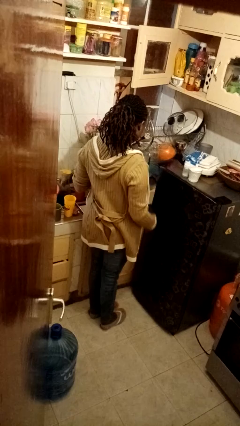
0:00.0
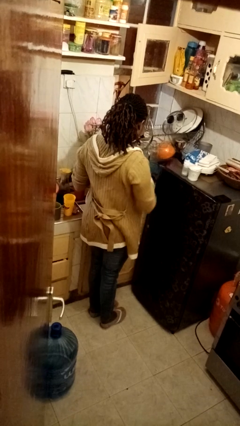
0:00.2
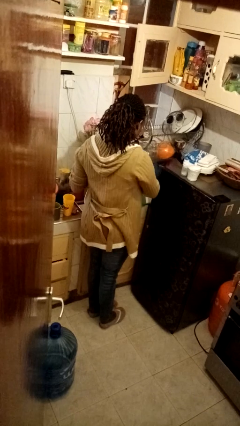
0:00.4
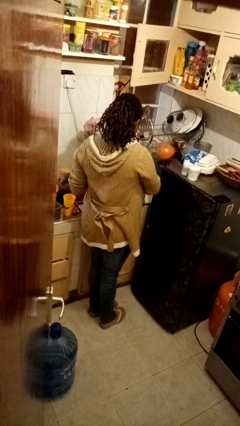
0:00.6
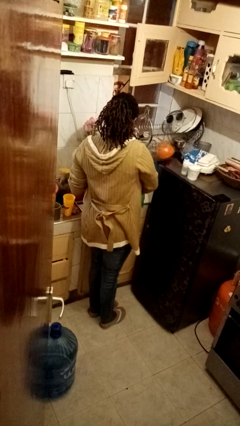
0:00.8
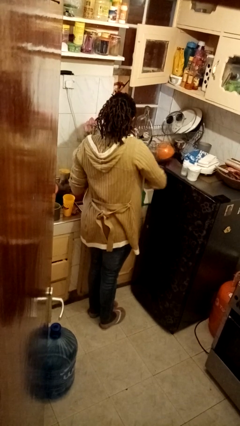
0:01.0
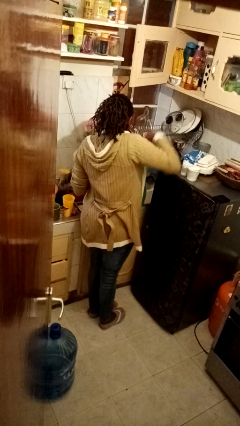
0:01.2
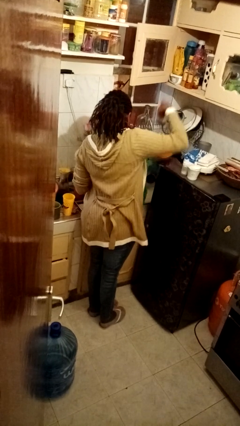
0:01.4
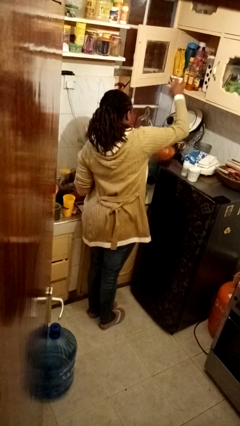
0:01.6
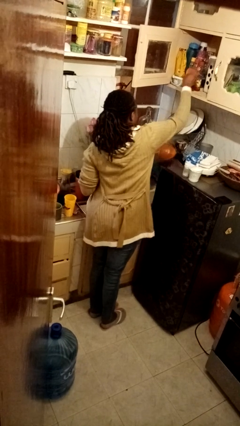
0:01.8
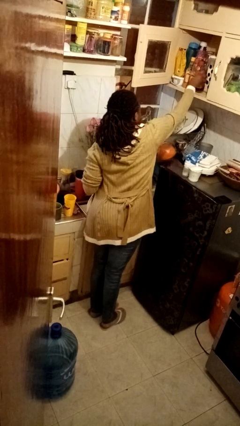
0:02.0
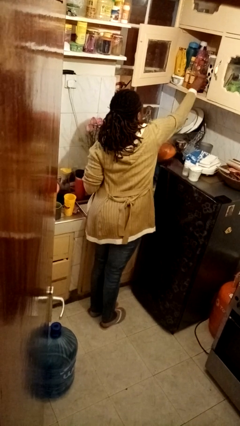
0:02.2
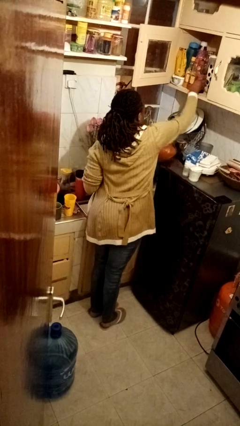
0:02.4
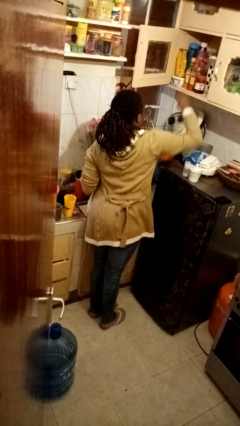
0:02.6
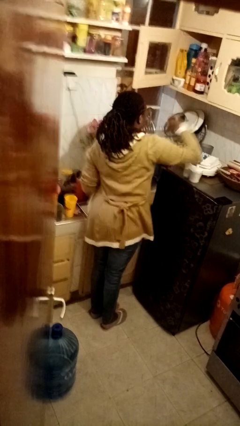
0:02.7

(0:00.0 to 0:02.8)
person loads groceries into cabinet

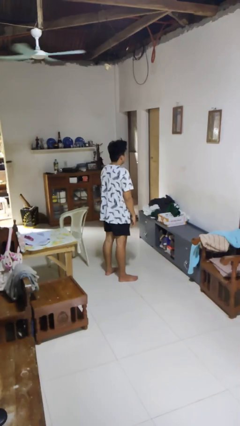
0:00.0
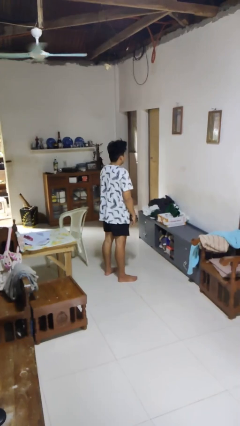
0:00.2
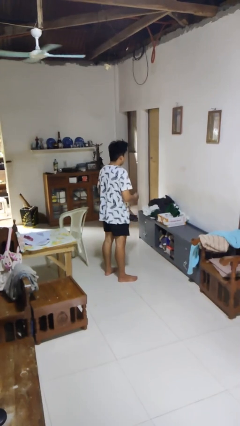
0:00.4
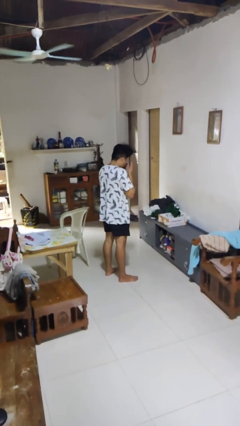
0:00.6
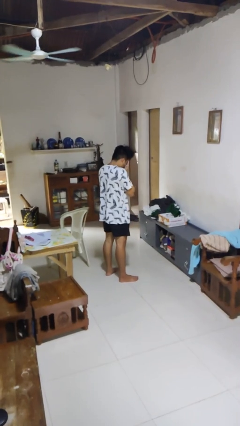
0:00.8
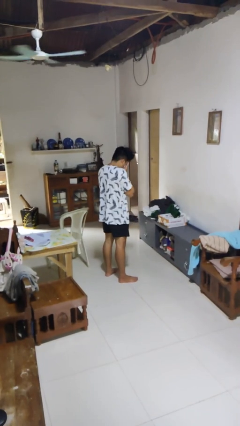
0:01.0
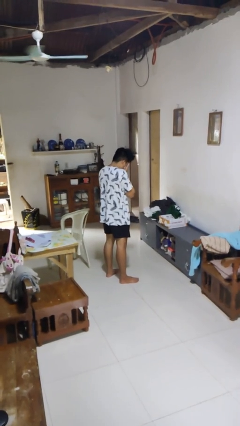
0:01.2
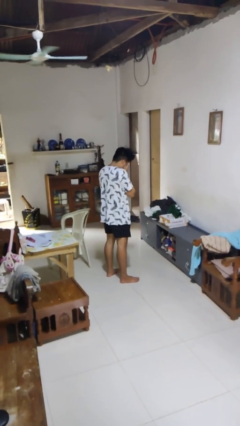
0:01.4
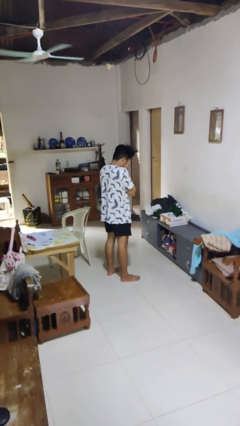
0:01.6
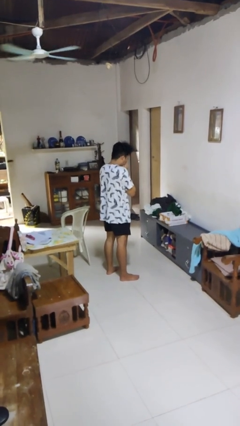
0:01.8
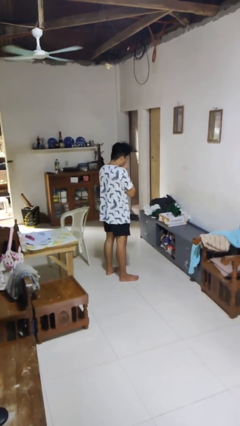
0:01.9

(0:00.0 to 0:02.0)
person covers face with hands

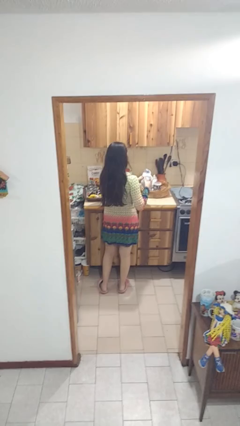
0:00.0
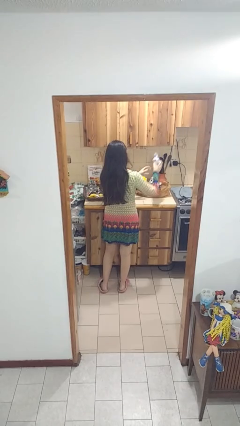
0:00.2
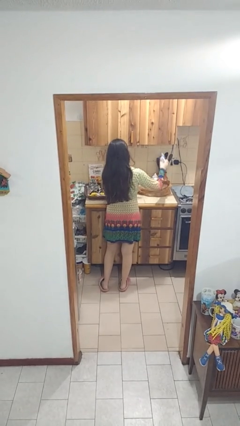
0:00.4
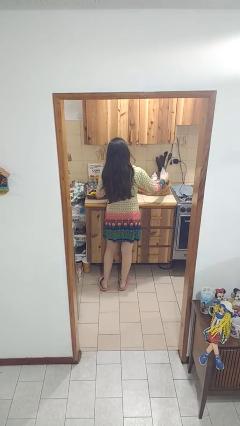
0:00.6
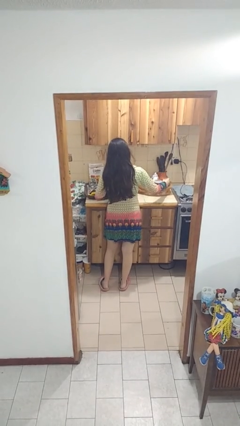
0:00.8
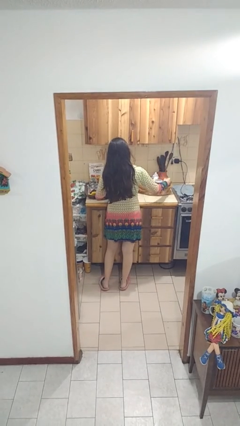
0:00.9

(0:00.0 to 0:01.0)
person puts object into bag

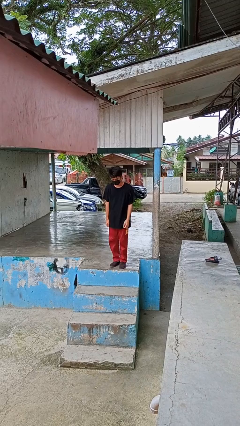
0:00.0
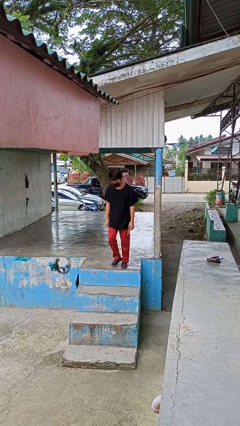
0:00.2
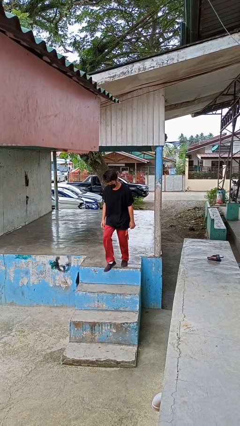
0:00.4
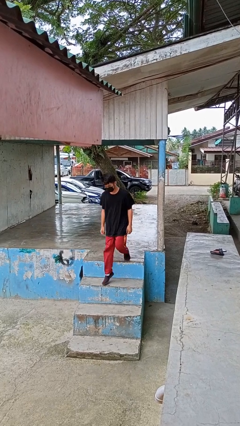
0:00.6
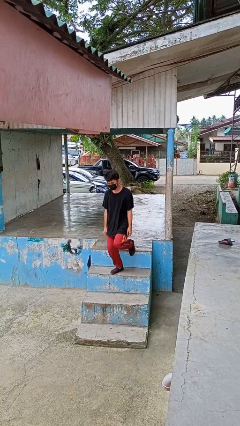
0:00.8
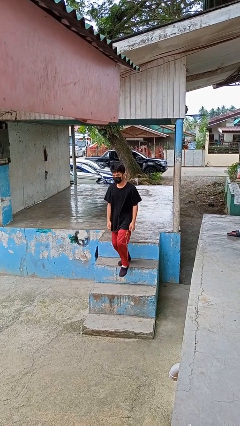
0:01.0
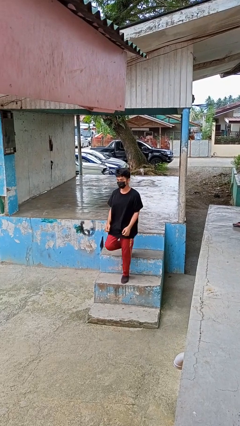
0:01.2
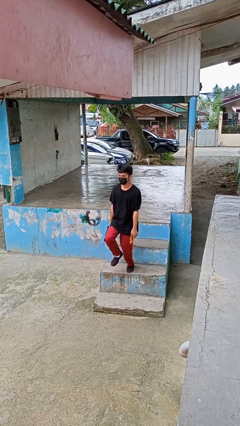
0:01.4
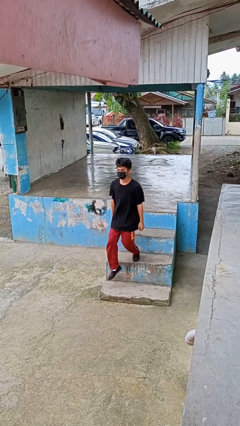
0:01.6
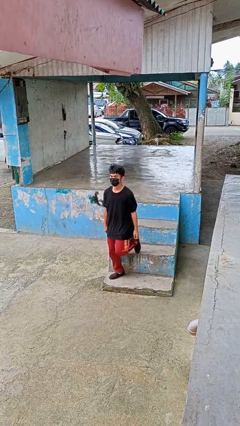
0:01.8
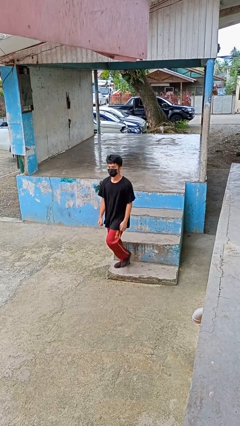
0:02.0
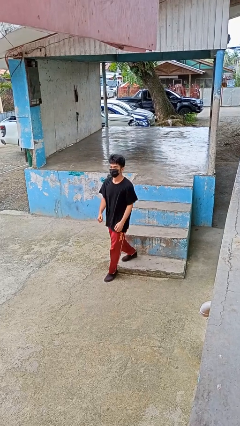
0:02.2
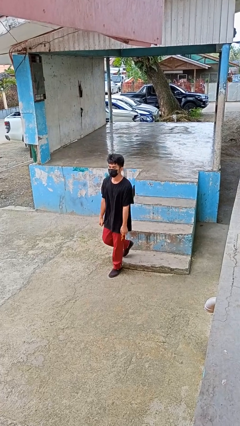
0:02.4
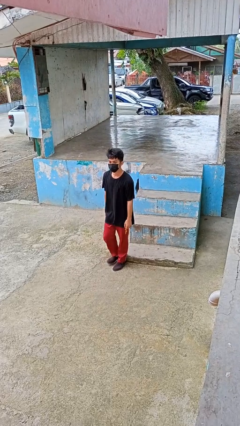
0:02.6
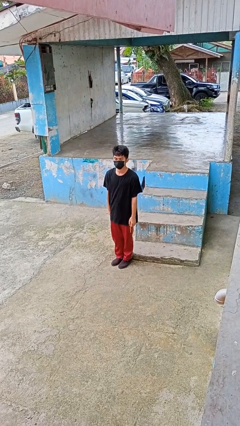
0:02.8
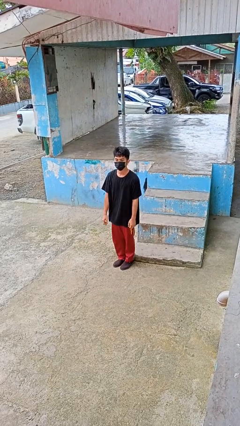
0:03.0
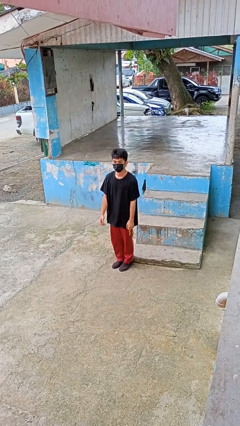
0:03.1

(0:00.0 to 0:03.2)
person climbs down stairs

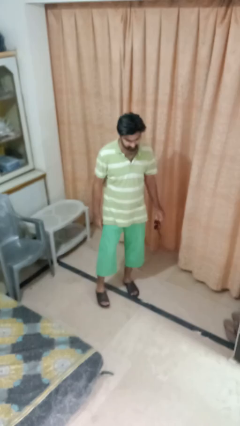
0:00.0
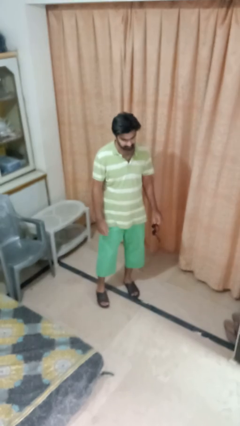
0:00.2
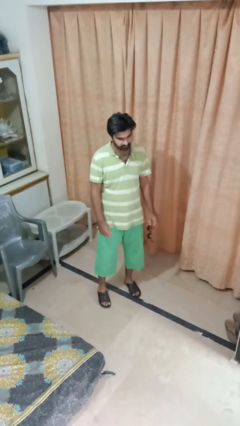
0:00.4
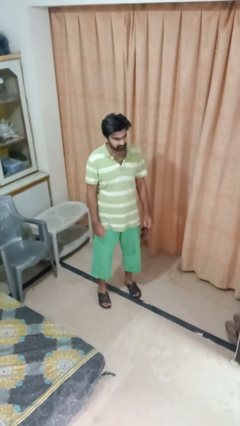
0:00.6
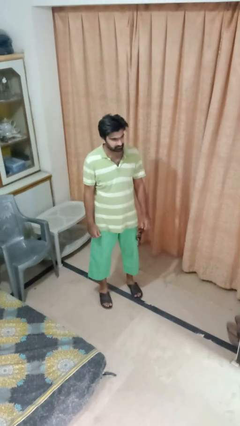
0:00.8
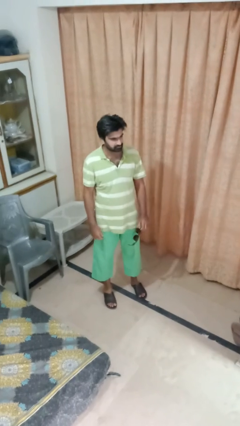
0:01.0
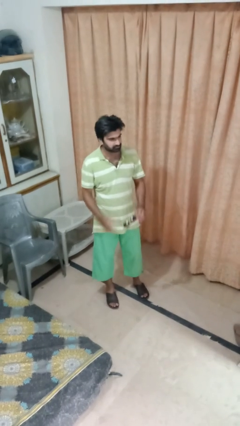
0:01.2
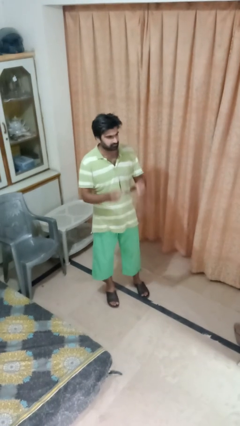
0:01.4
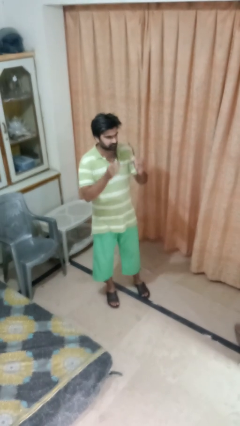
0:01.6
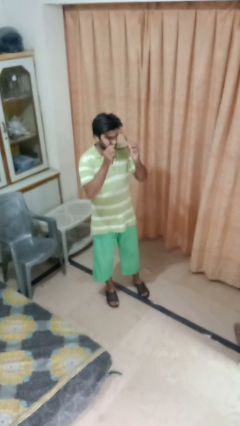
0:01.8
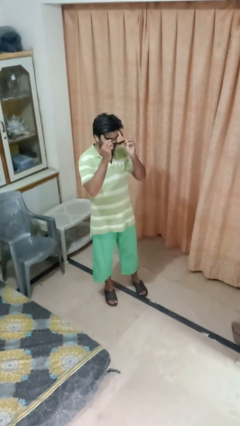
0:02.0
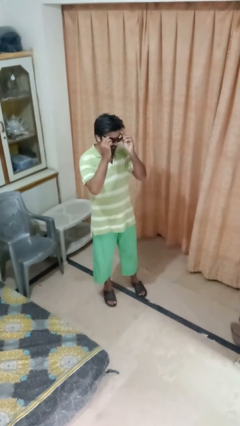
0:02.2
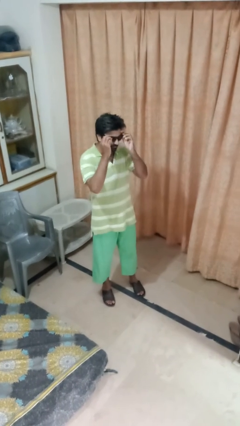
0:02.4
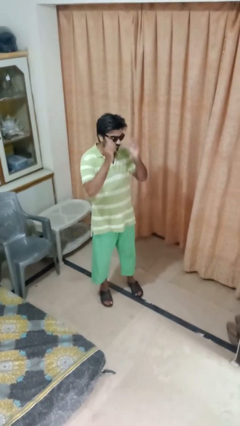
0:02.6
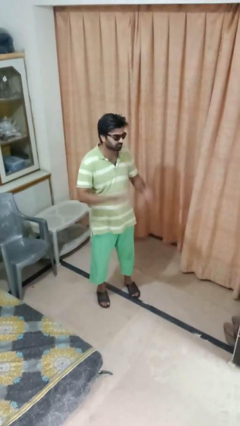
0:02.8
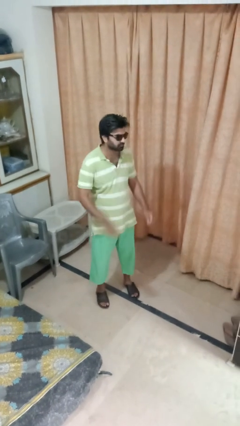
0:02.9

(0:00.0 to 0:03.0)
person puts on sunglasses

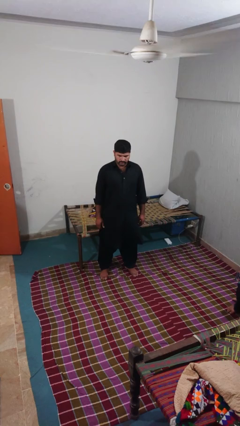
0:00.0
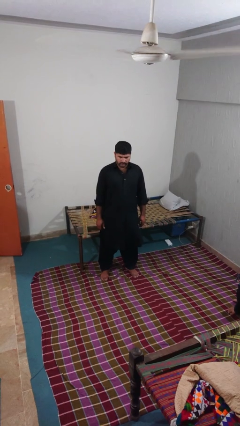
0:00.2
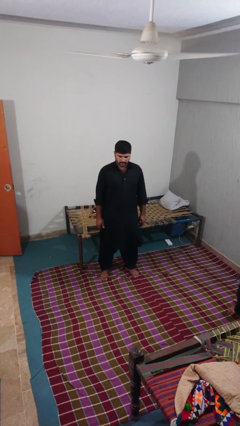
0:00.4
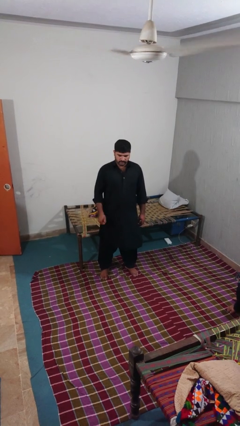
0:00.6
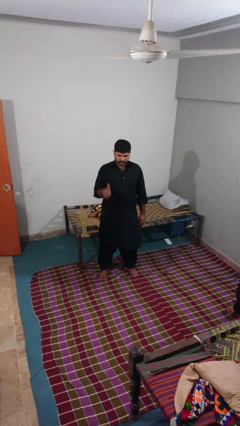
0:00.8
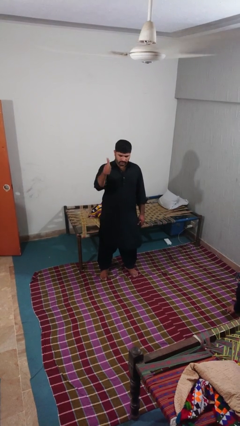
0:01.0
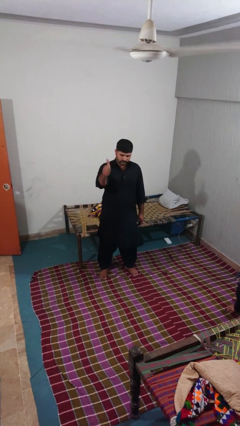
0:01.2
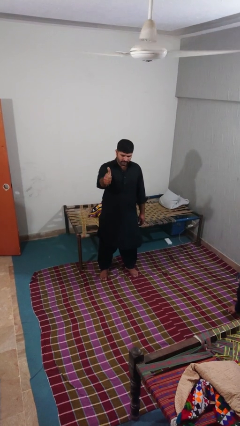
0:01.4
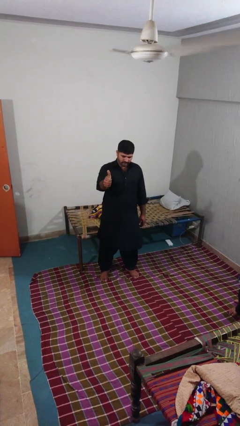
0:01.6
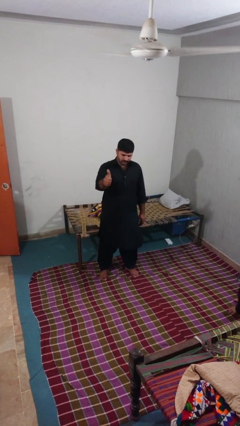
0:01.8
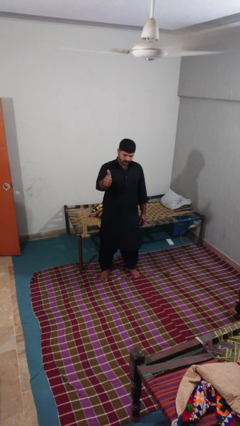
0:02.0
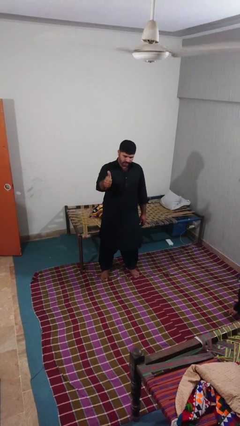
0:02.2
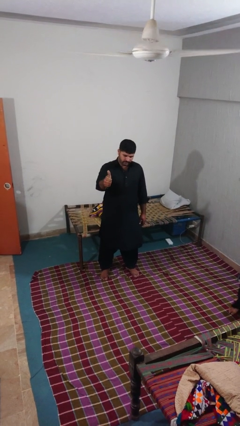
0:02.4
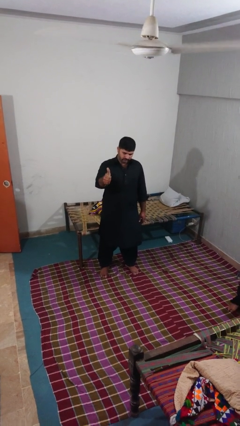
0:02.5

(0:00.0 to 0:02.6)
person gestures thumbs up

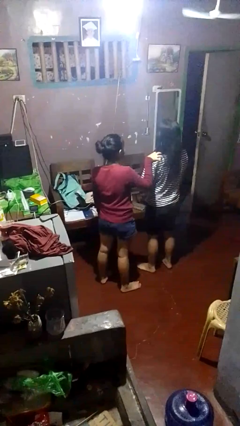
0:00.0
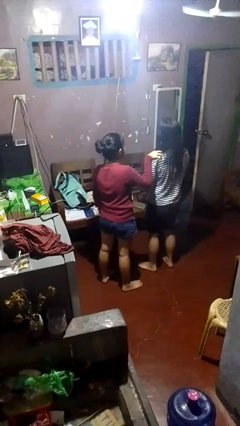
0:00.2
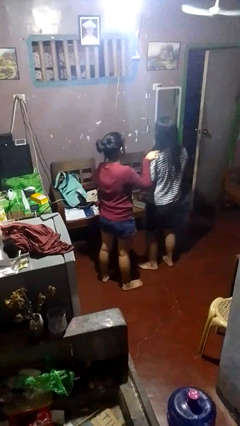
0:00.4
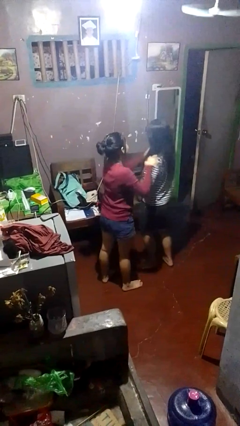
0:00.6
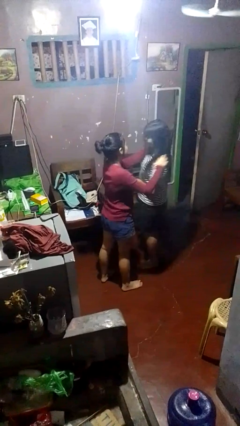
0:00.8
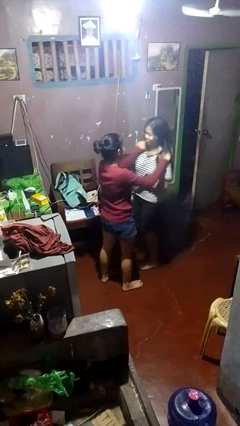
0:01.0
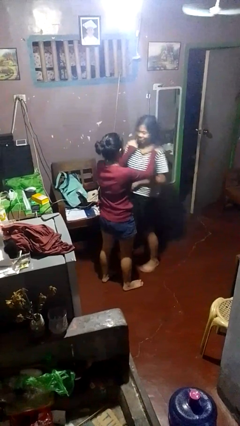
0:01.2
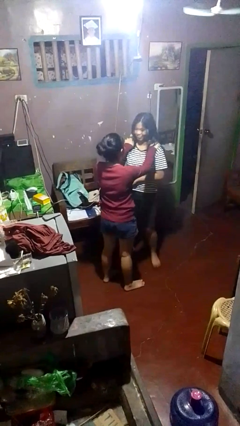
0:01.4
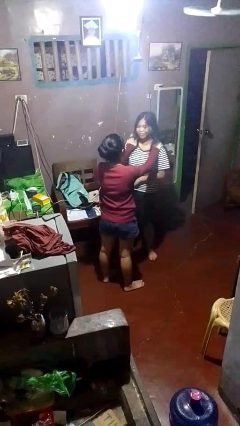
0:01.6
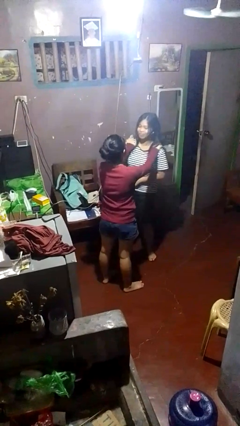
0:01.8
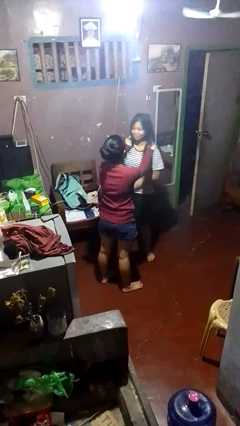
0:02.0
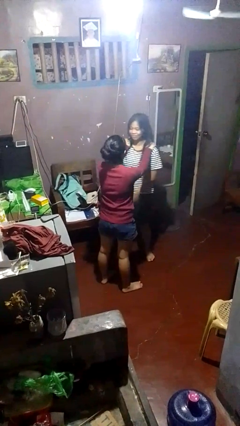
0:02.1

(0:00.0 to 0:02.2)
person spins person around
